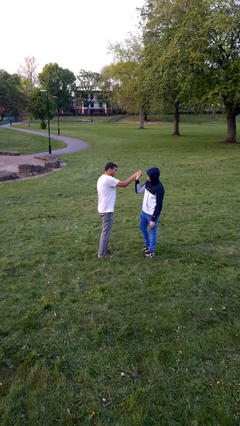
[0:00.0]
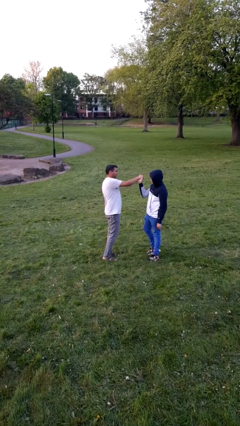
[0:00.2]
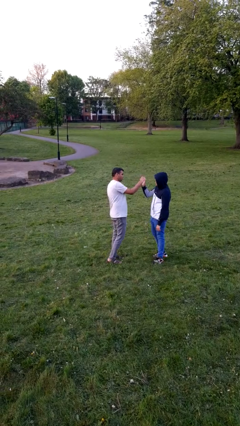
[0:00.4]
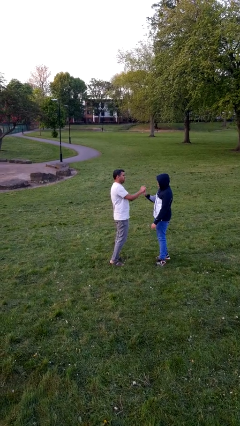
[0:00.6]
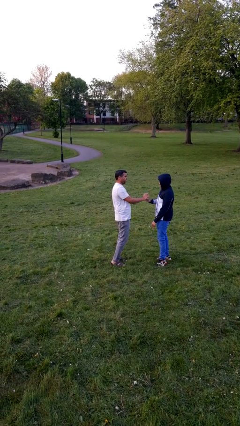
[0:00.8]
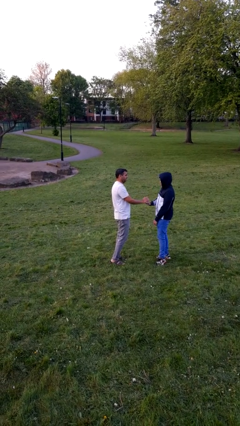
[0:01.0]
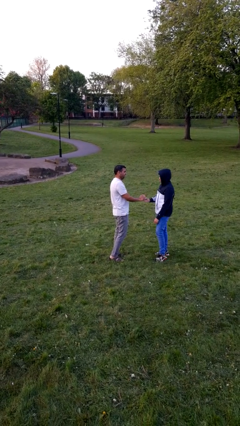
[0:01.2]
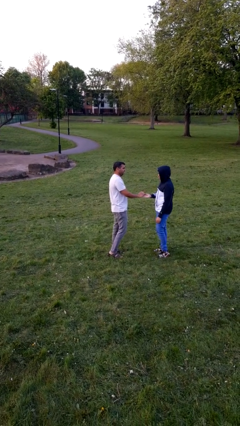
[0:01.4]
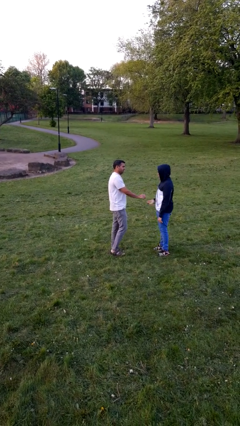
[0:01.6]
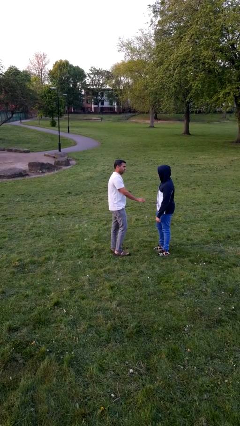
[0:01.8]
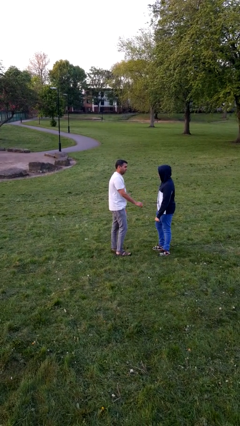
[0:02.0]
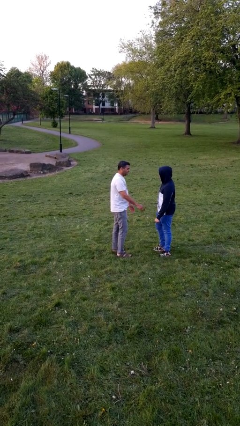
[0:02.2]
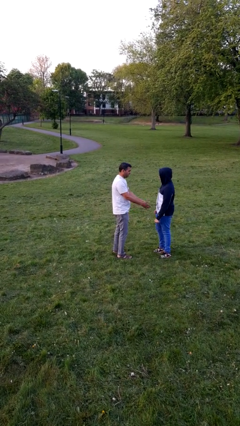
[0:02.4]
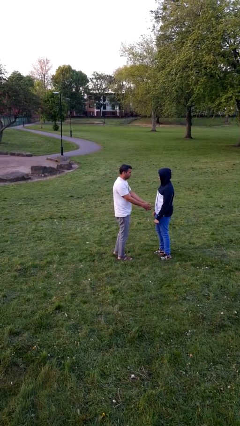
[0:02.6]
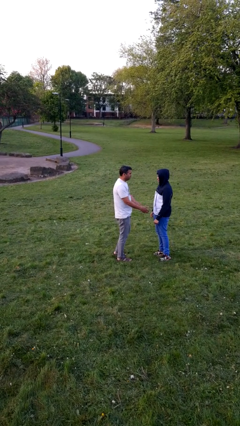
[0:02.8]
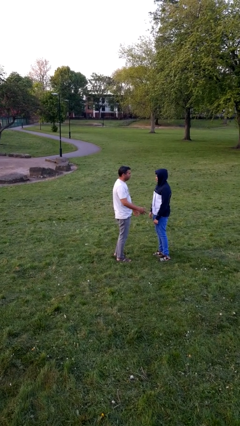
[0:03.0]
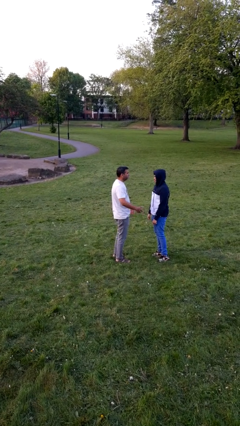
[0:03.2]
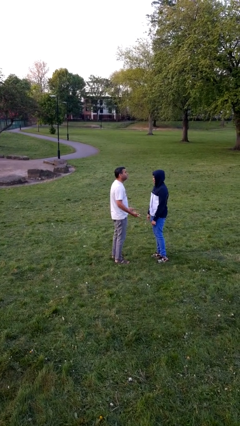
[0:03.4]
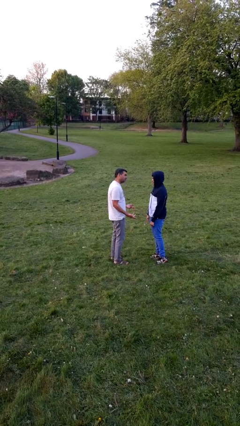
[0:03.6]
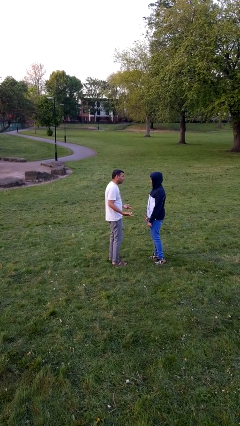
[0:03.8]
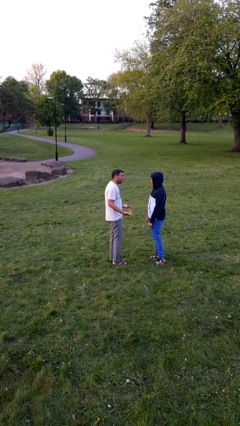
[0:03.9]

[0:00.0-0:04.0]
person highfives hand

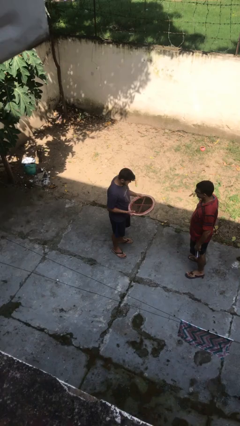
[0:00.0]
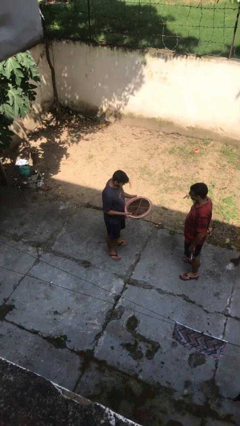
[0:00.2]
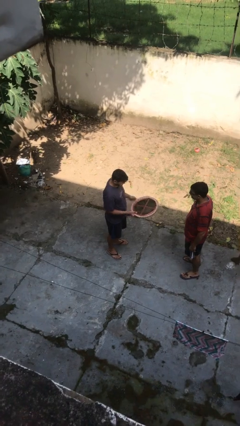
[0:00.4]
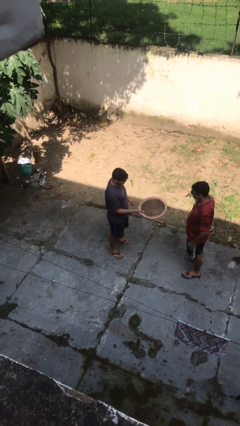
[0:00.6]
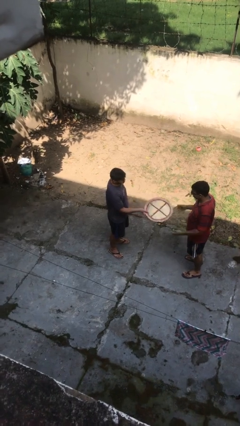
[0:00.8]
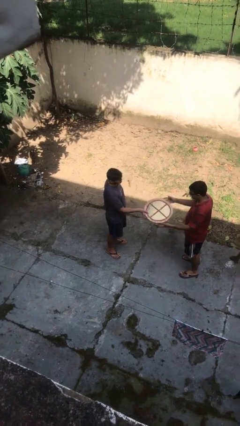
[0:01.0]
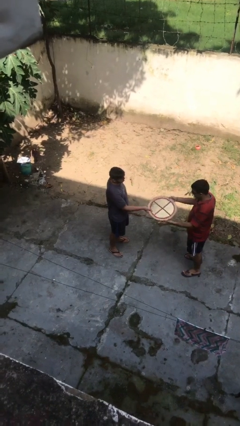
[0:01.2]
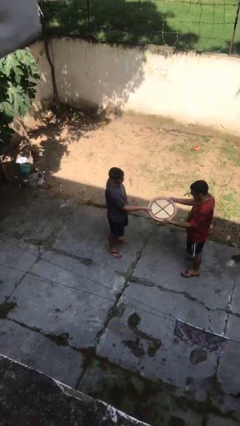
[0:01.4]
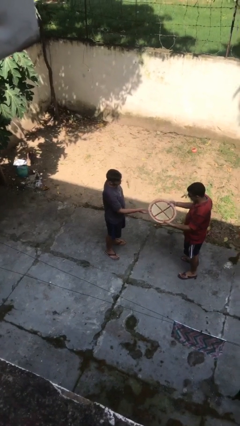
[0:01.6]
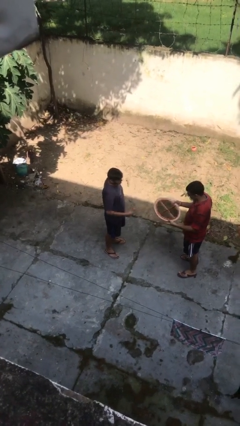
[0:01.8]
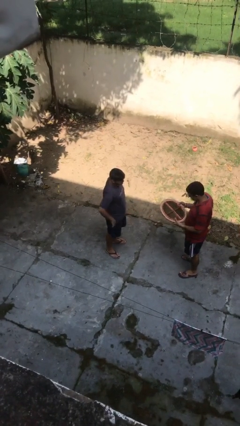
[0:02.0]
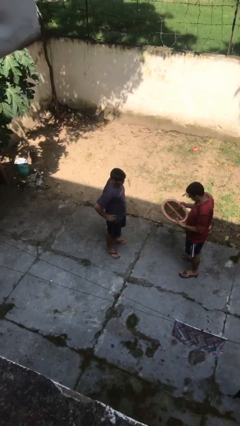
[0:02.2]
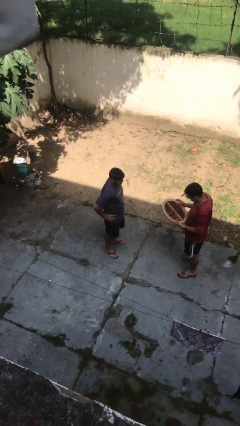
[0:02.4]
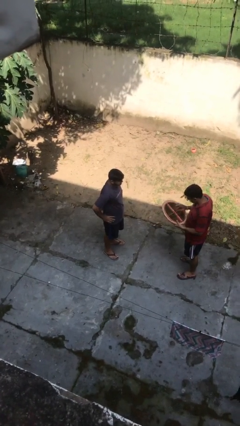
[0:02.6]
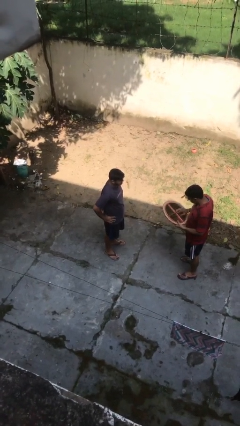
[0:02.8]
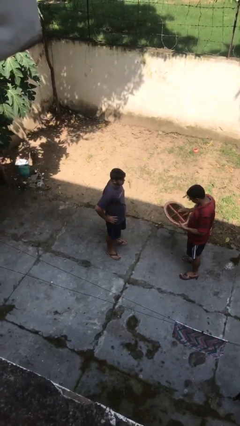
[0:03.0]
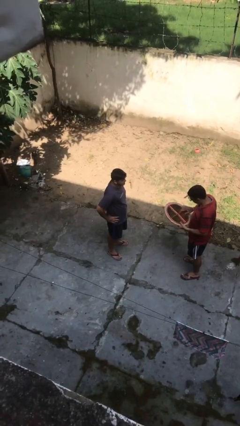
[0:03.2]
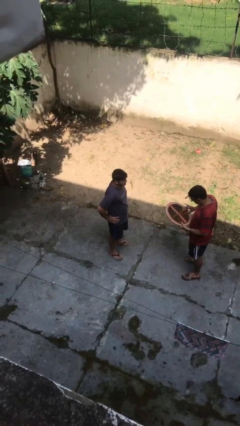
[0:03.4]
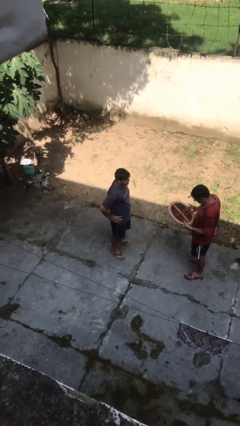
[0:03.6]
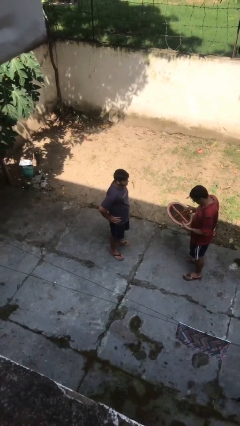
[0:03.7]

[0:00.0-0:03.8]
person transfers object to person

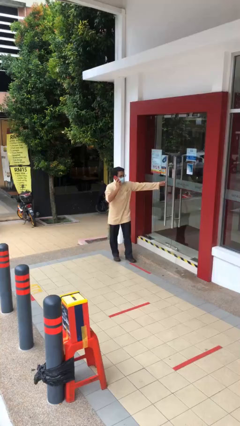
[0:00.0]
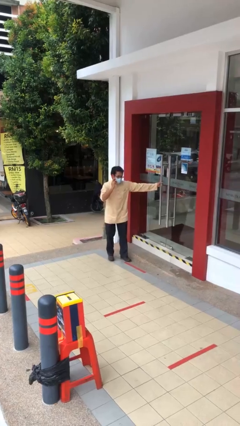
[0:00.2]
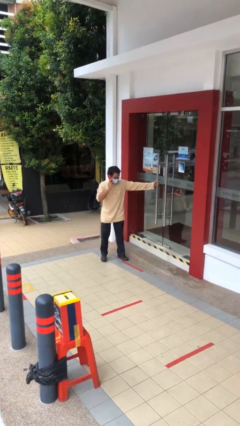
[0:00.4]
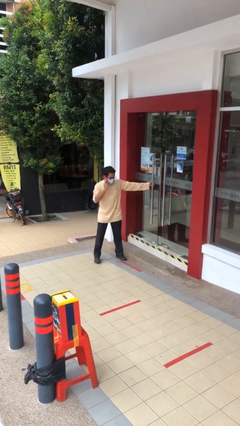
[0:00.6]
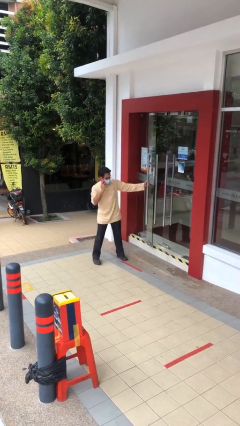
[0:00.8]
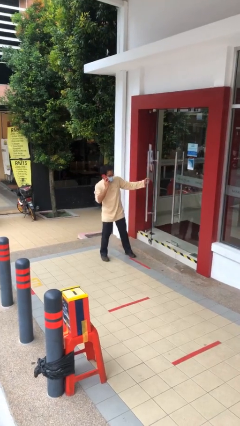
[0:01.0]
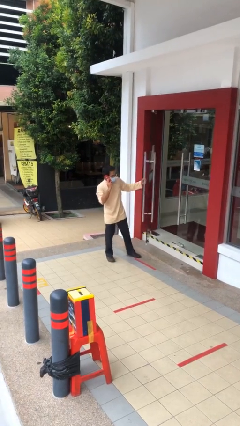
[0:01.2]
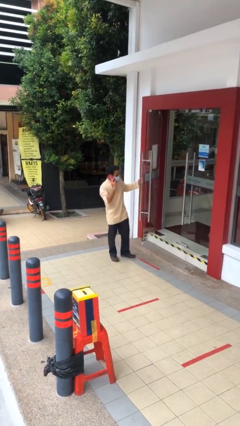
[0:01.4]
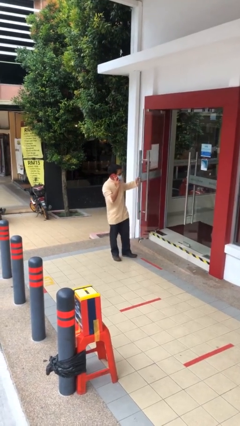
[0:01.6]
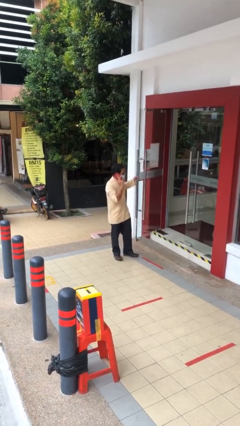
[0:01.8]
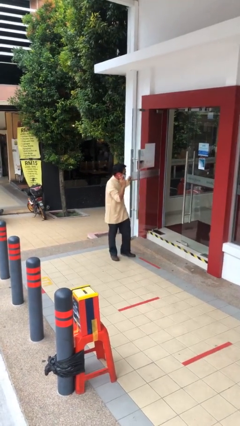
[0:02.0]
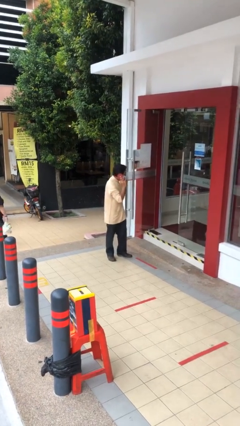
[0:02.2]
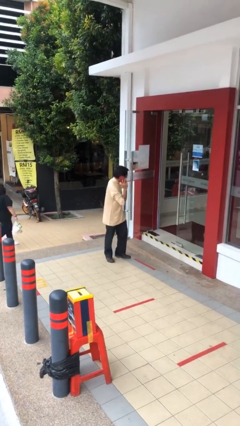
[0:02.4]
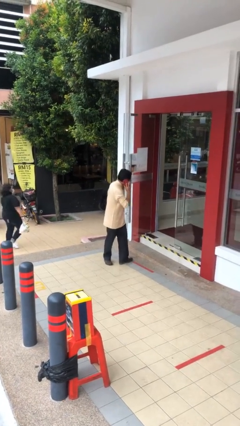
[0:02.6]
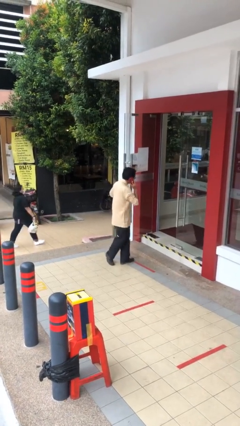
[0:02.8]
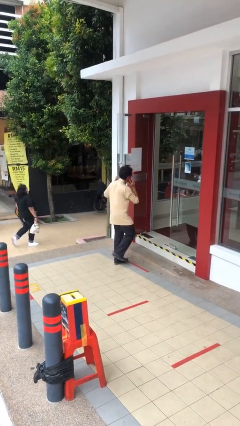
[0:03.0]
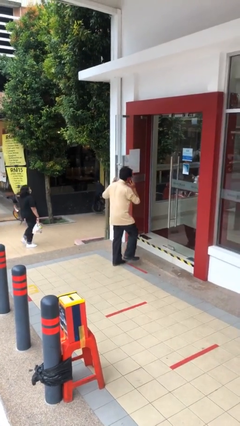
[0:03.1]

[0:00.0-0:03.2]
person opens facility door

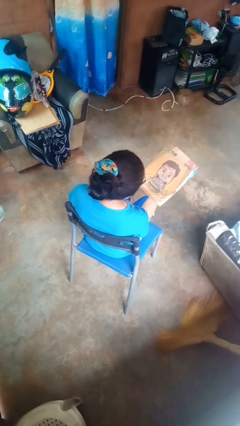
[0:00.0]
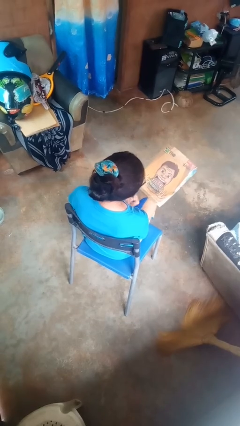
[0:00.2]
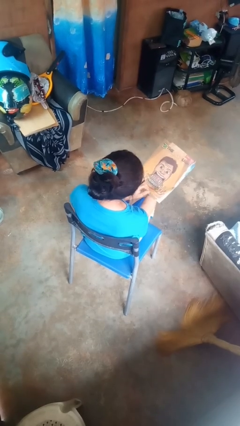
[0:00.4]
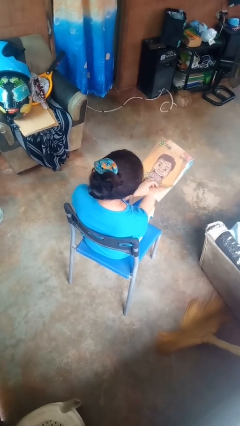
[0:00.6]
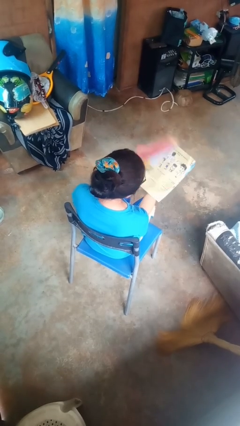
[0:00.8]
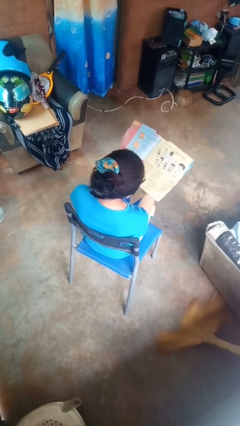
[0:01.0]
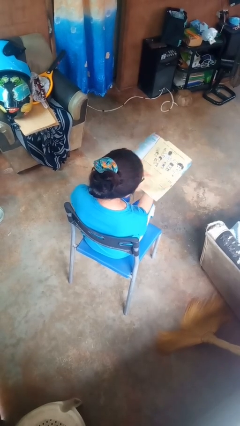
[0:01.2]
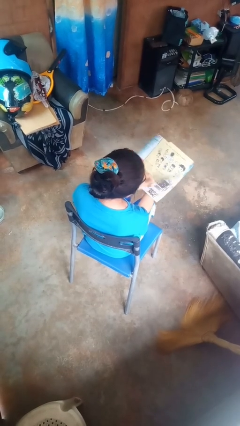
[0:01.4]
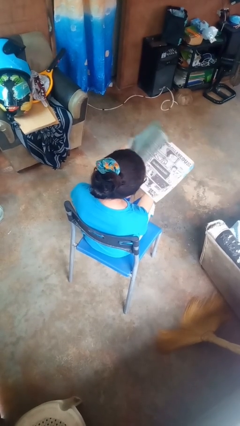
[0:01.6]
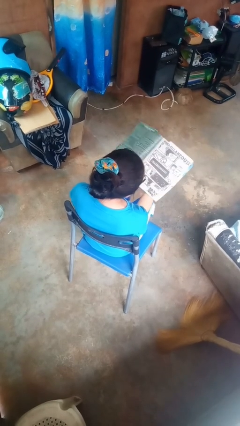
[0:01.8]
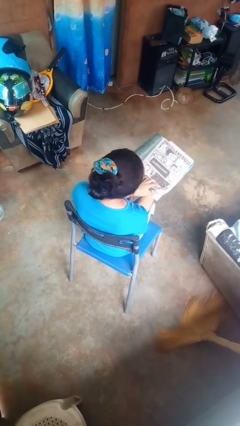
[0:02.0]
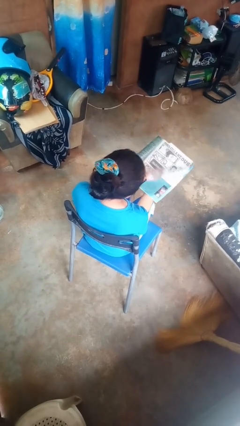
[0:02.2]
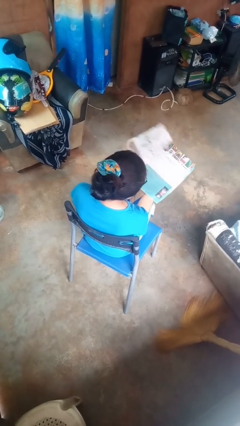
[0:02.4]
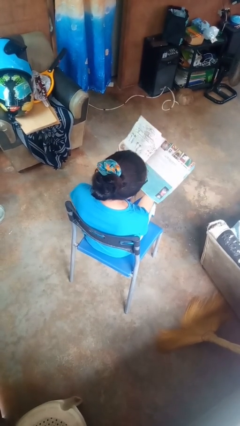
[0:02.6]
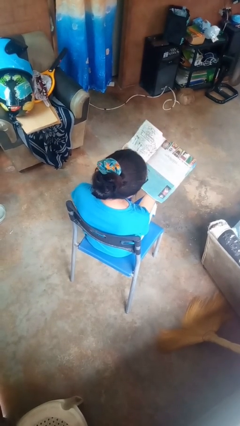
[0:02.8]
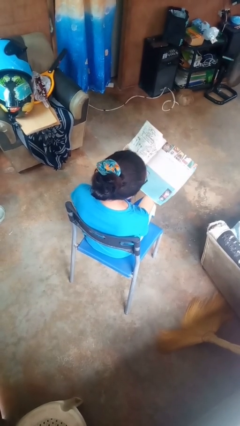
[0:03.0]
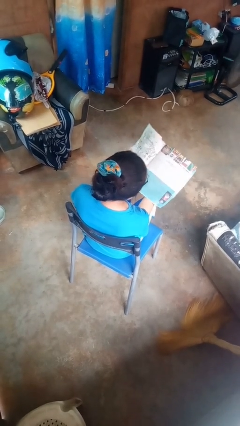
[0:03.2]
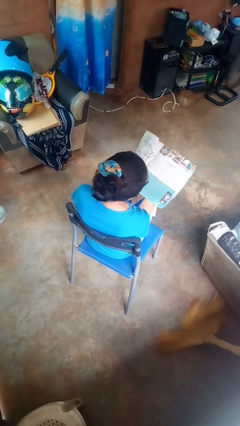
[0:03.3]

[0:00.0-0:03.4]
person reads magazine

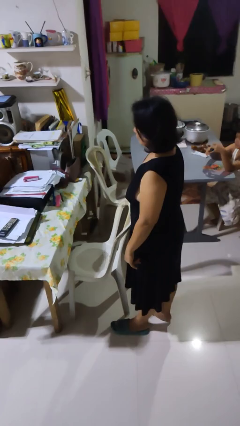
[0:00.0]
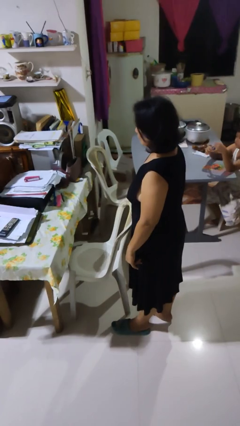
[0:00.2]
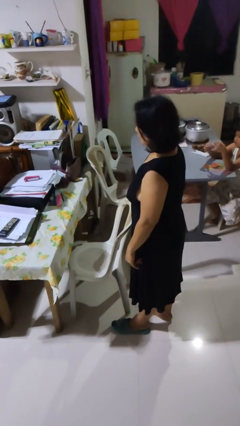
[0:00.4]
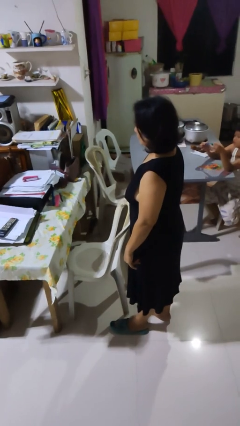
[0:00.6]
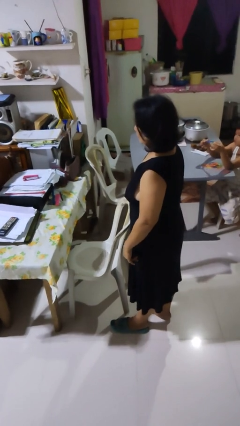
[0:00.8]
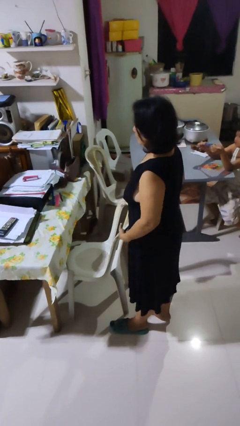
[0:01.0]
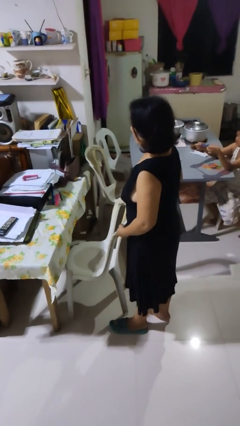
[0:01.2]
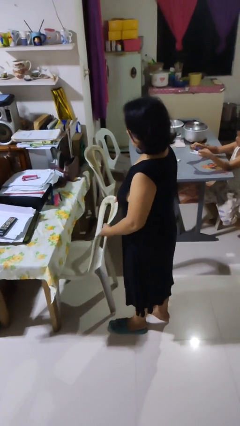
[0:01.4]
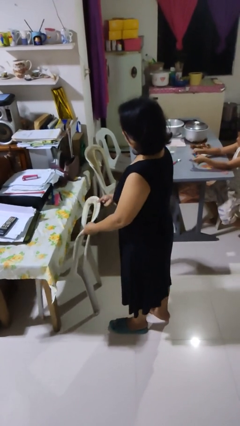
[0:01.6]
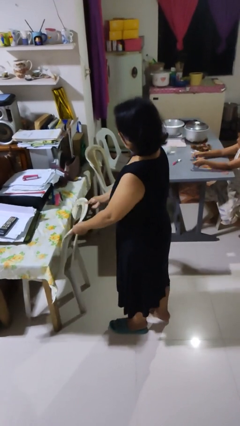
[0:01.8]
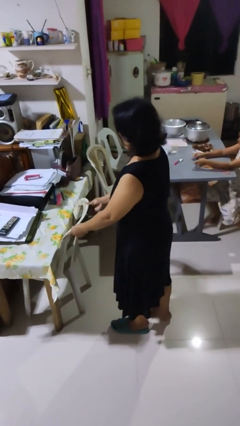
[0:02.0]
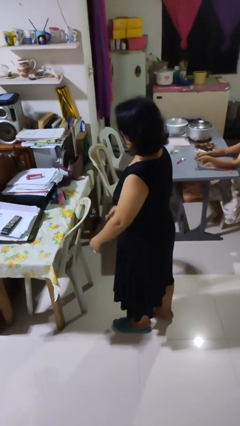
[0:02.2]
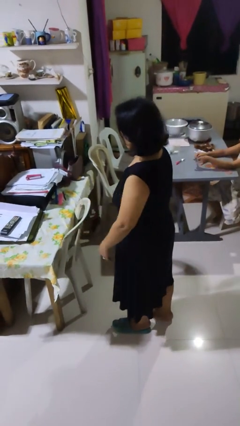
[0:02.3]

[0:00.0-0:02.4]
person pushes in chair

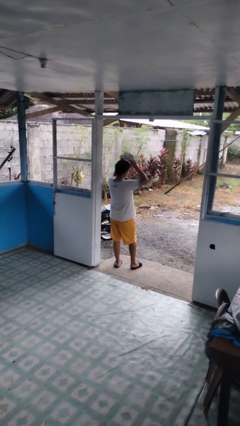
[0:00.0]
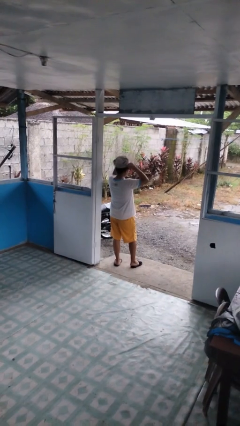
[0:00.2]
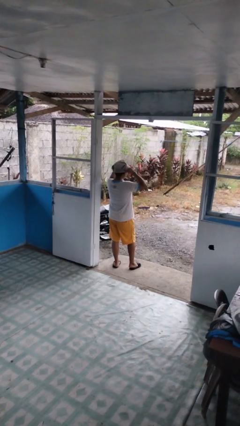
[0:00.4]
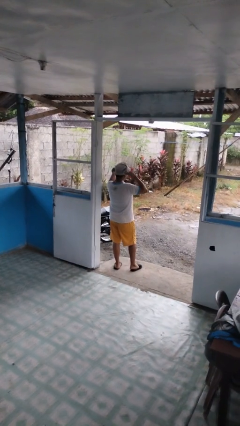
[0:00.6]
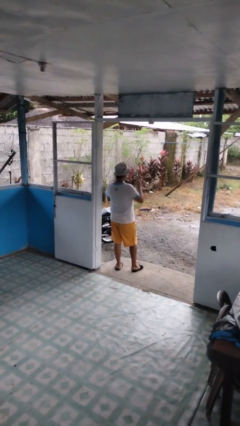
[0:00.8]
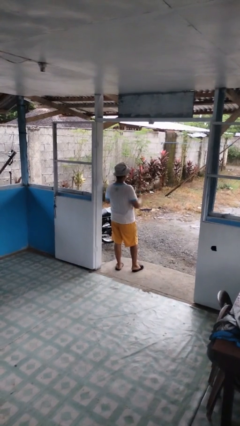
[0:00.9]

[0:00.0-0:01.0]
person puts on hat
